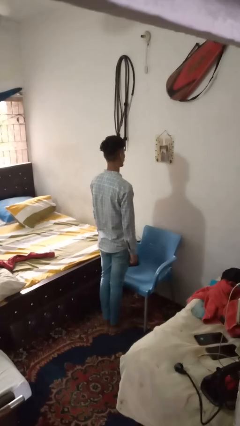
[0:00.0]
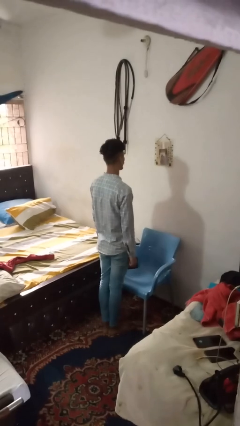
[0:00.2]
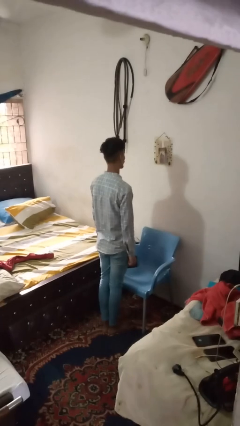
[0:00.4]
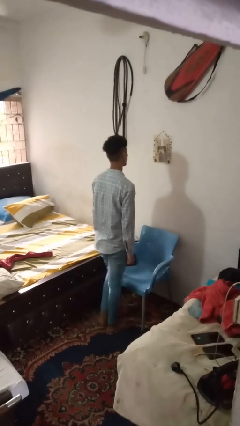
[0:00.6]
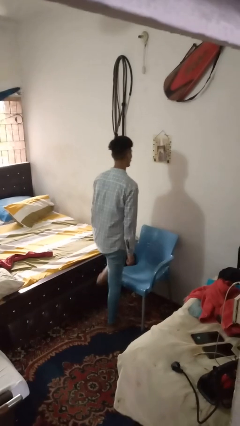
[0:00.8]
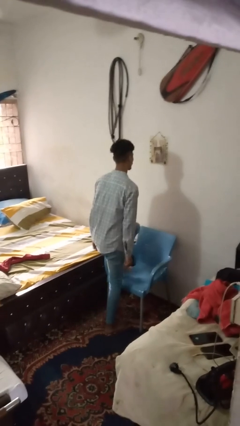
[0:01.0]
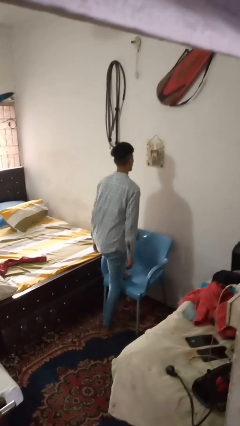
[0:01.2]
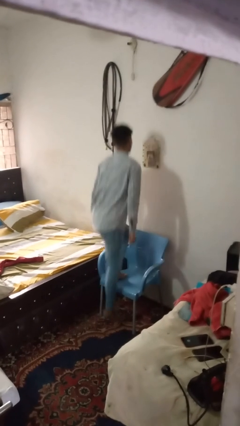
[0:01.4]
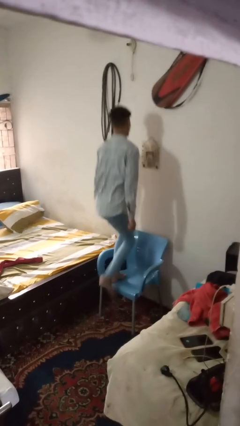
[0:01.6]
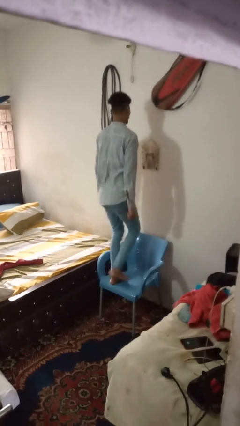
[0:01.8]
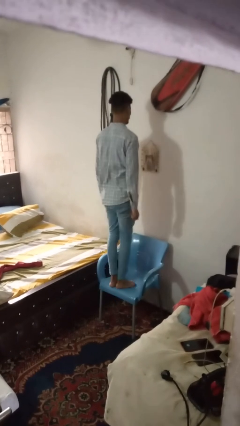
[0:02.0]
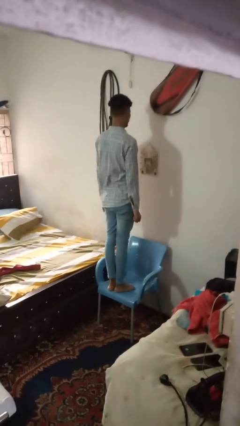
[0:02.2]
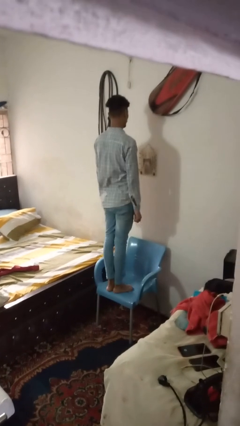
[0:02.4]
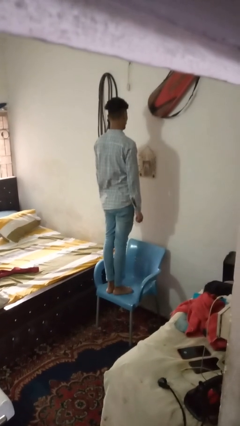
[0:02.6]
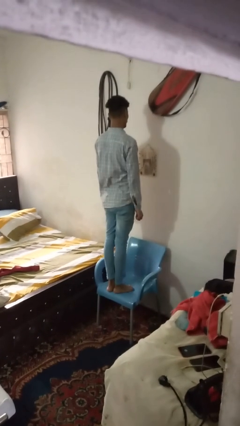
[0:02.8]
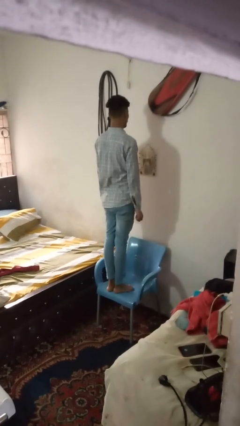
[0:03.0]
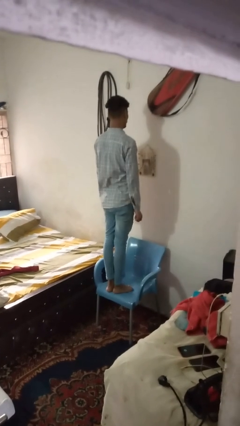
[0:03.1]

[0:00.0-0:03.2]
person climbs on chair

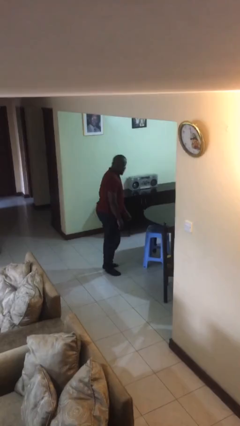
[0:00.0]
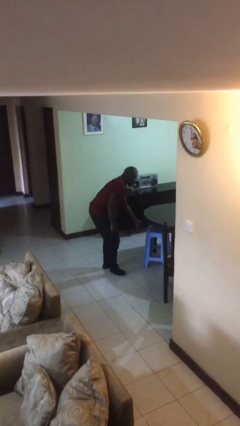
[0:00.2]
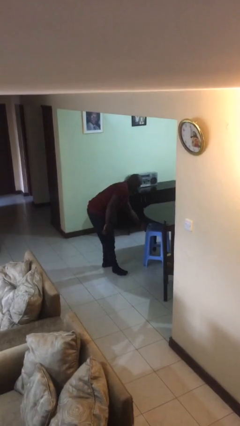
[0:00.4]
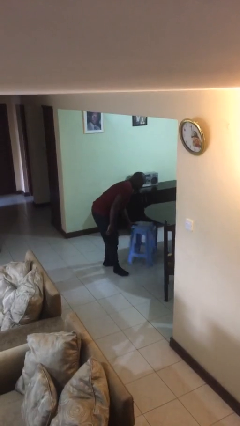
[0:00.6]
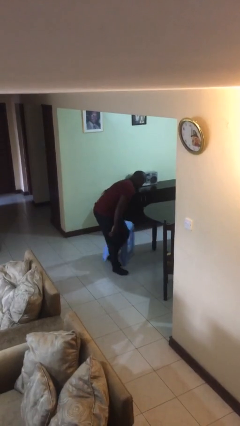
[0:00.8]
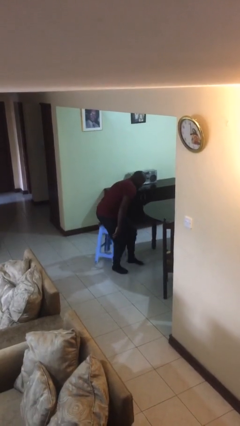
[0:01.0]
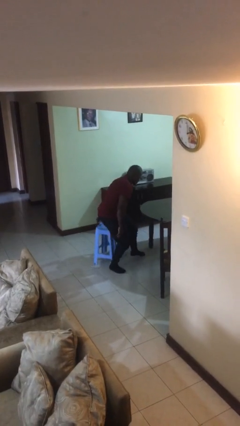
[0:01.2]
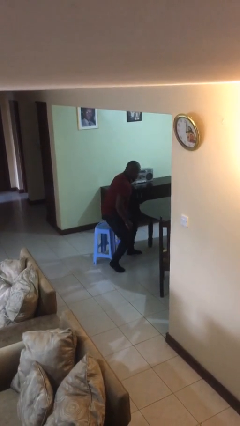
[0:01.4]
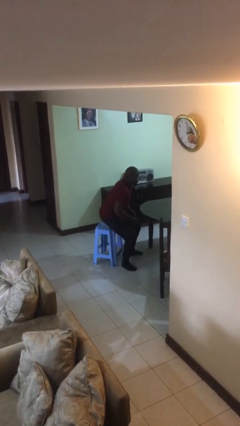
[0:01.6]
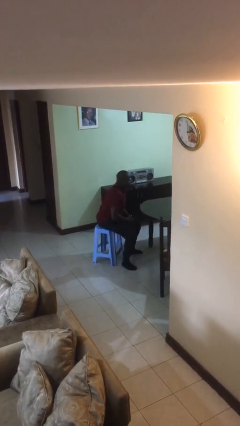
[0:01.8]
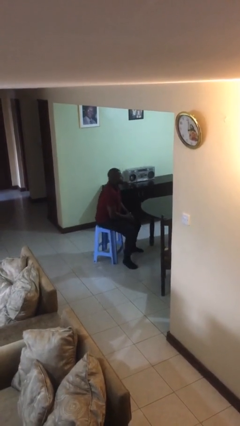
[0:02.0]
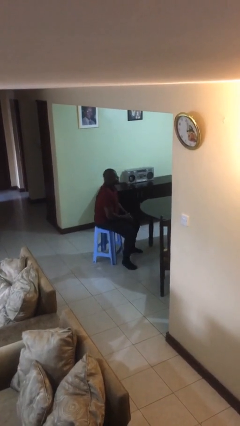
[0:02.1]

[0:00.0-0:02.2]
person sits down

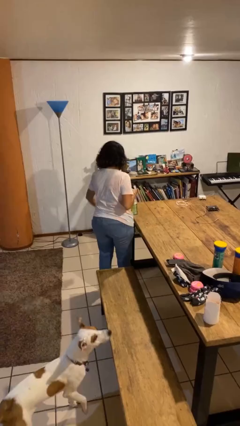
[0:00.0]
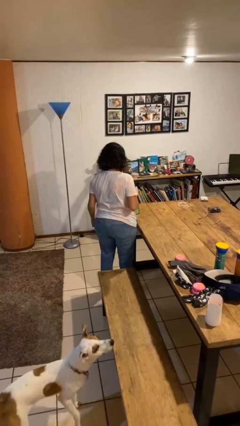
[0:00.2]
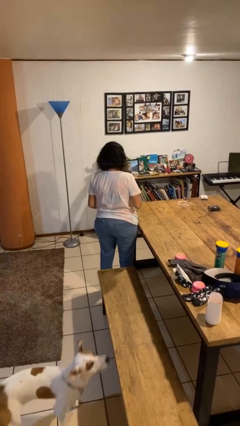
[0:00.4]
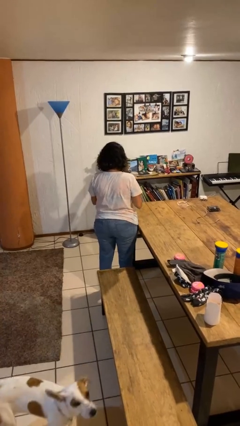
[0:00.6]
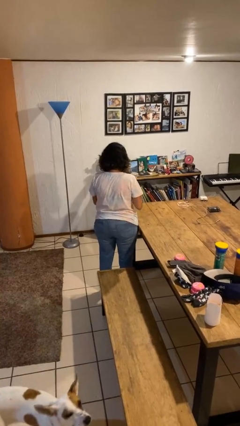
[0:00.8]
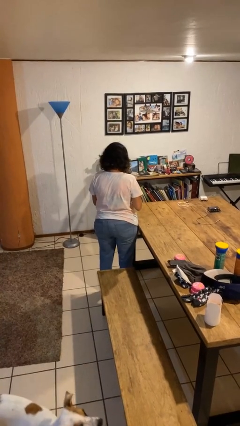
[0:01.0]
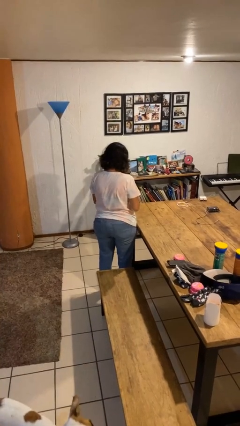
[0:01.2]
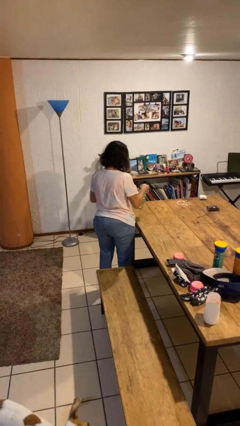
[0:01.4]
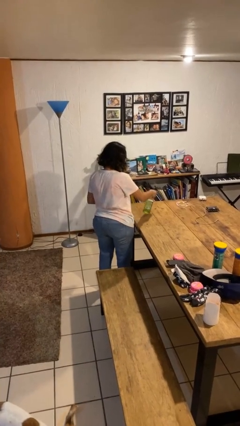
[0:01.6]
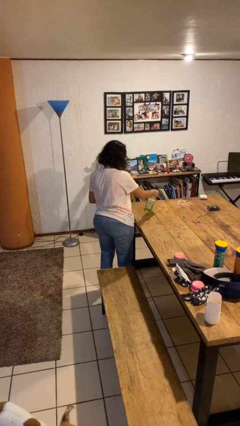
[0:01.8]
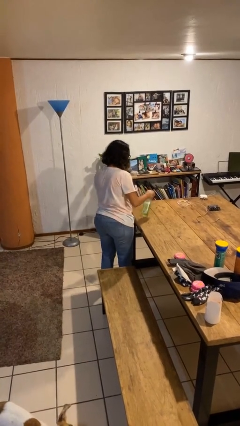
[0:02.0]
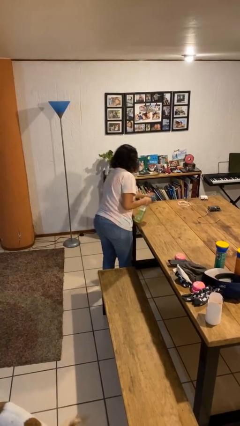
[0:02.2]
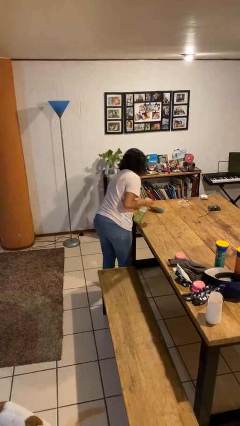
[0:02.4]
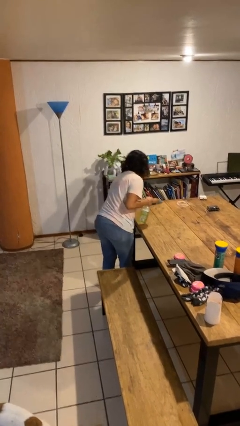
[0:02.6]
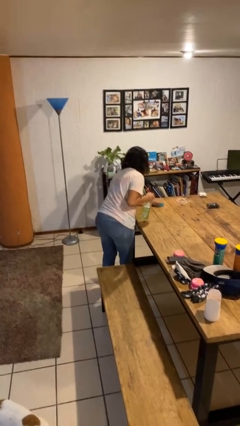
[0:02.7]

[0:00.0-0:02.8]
person sprays from bottle

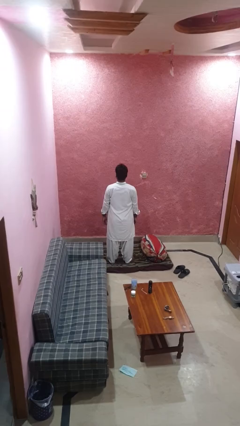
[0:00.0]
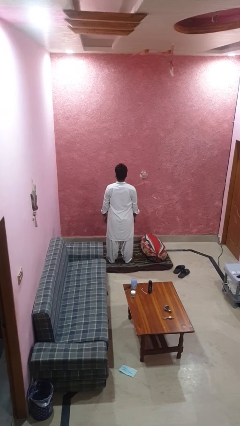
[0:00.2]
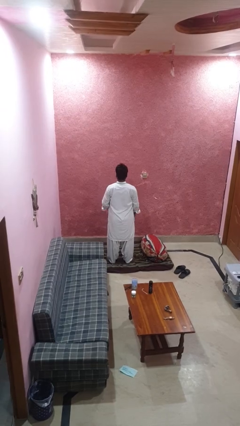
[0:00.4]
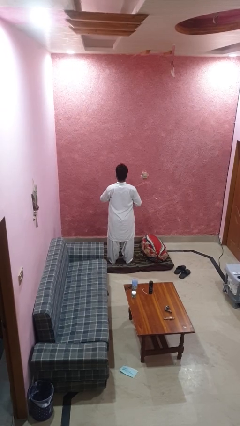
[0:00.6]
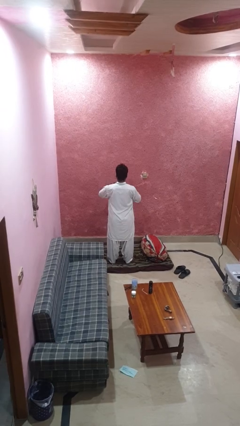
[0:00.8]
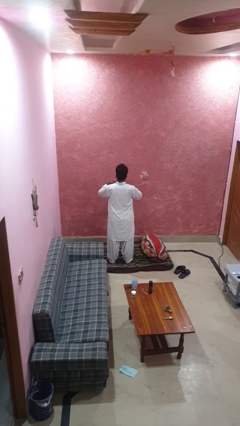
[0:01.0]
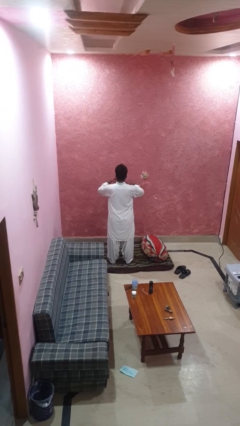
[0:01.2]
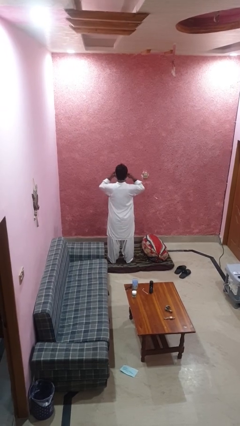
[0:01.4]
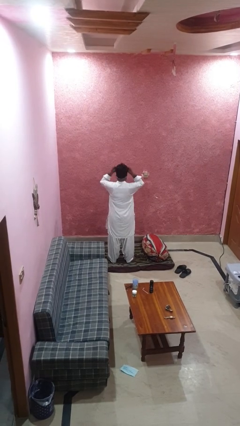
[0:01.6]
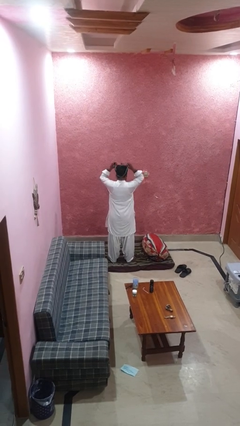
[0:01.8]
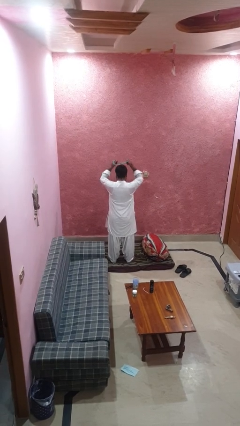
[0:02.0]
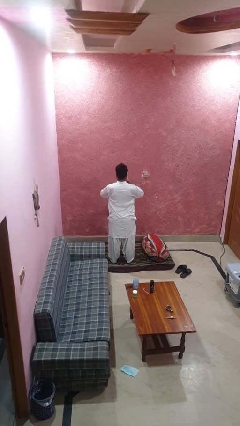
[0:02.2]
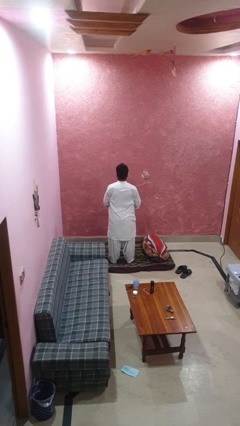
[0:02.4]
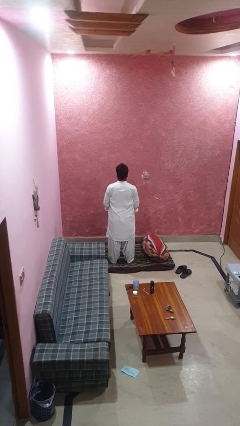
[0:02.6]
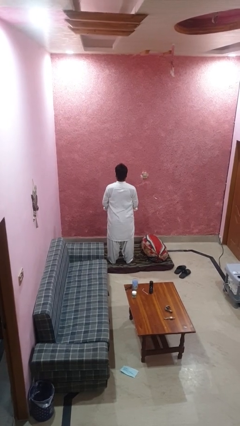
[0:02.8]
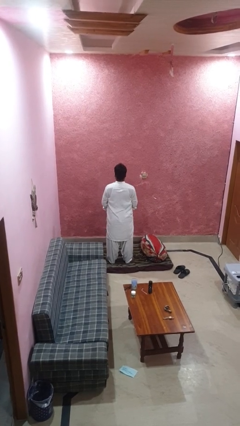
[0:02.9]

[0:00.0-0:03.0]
person takes off necklace

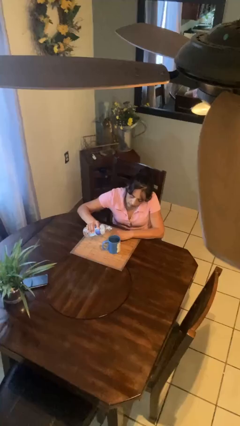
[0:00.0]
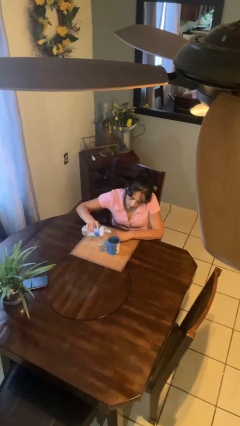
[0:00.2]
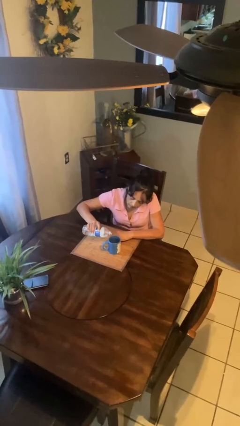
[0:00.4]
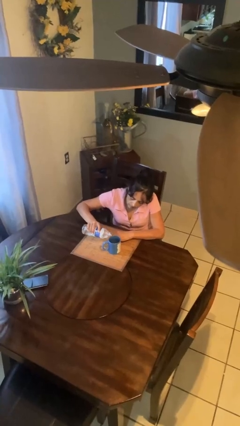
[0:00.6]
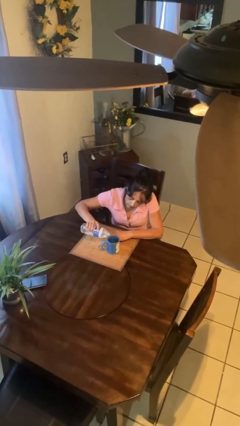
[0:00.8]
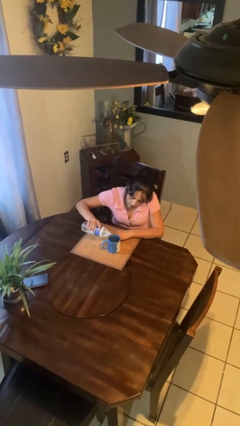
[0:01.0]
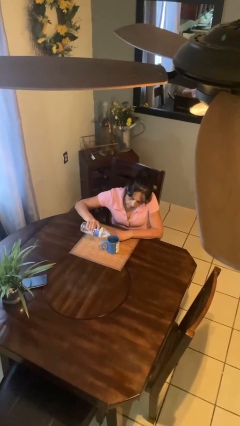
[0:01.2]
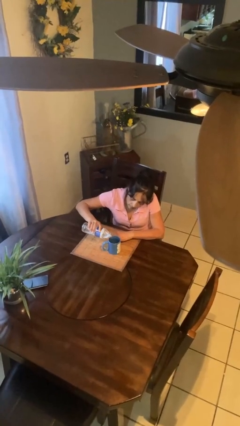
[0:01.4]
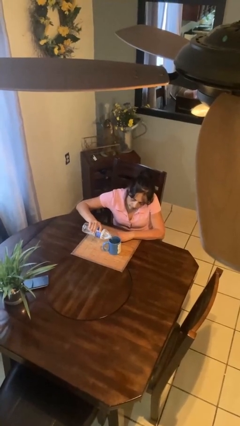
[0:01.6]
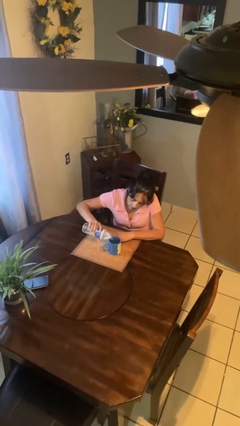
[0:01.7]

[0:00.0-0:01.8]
person pours liquid into cup

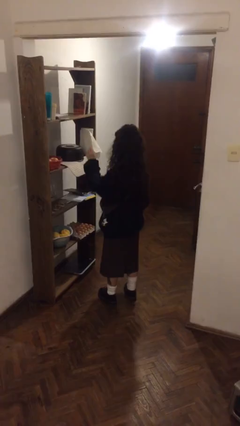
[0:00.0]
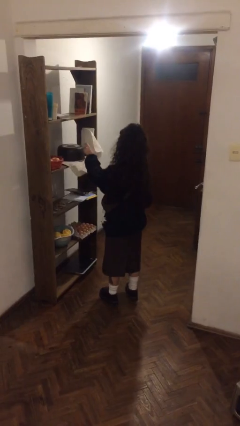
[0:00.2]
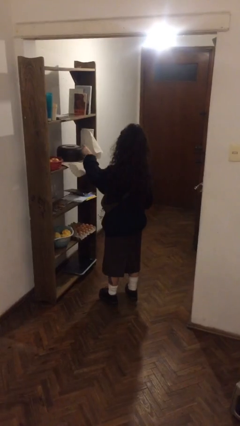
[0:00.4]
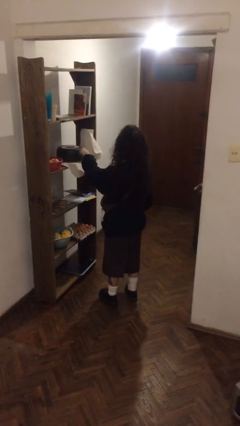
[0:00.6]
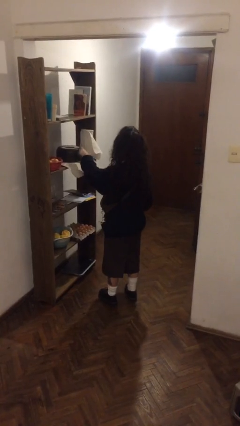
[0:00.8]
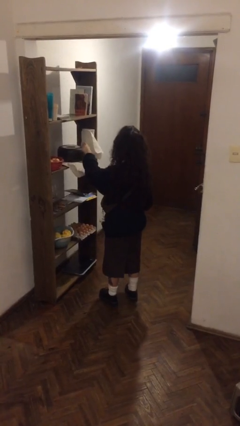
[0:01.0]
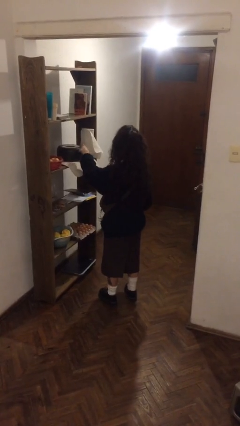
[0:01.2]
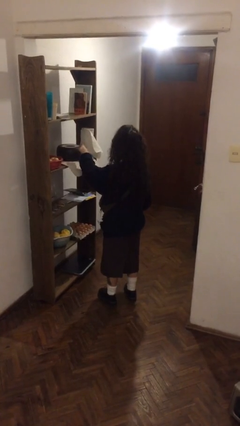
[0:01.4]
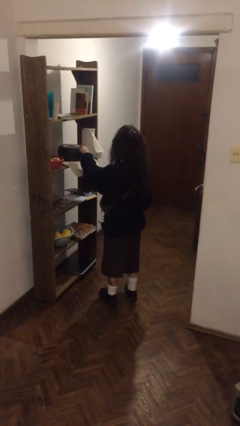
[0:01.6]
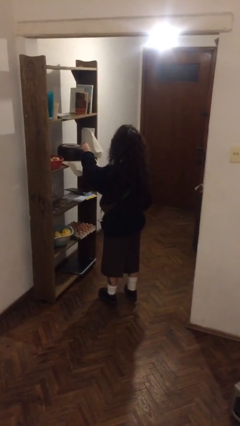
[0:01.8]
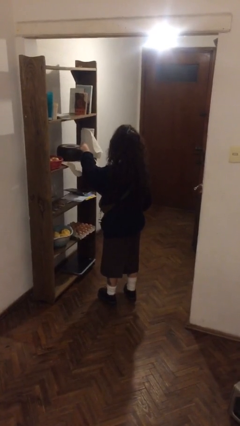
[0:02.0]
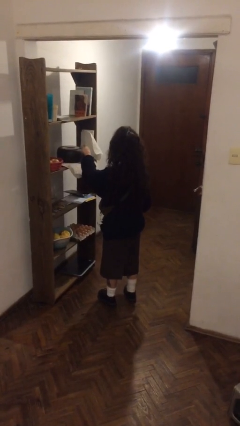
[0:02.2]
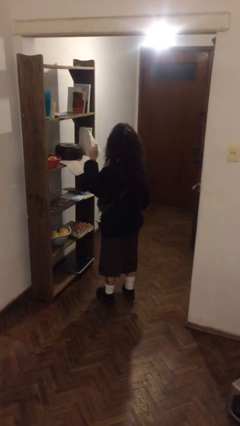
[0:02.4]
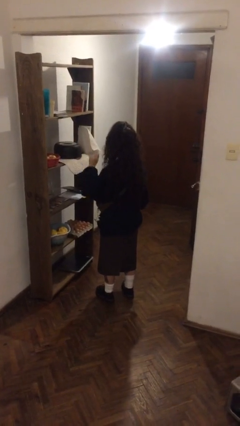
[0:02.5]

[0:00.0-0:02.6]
person taps object with finger

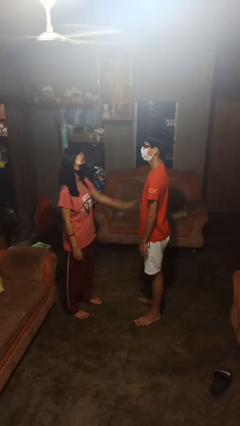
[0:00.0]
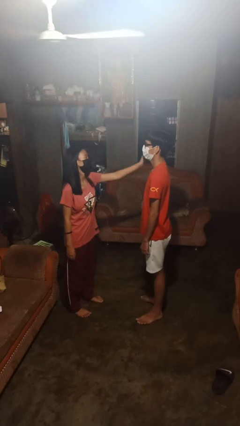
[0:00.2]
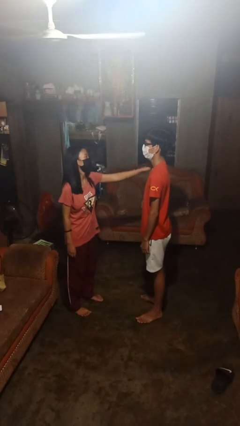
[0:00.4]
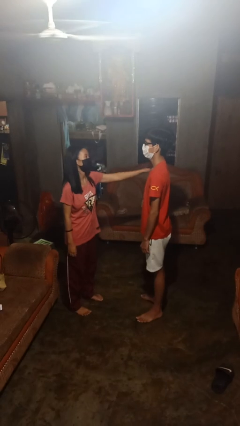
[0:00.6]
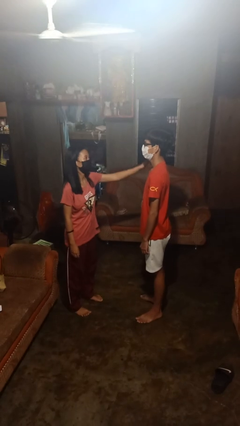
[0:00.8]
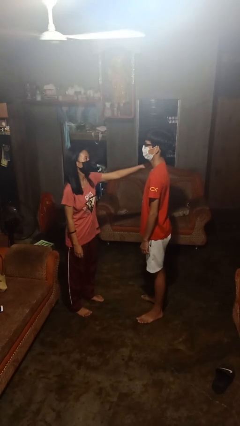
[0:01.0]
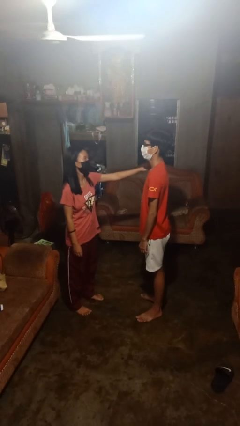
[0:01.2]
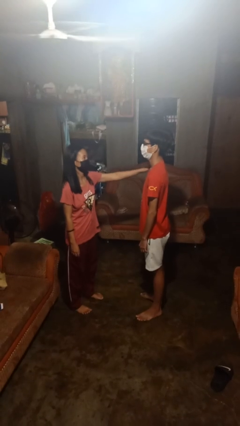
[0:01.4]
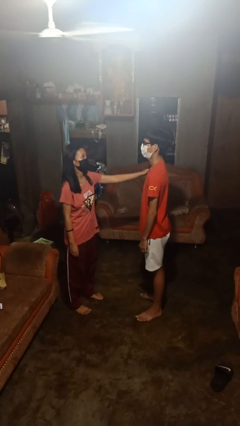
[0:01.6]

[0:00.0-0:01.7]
person pounds shoulders of person
